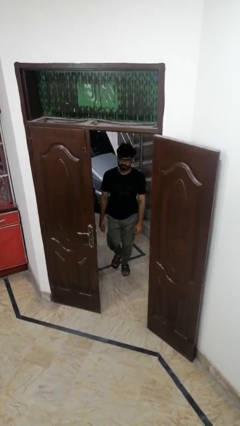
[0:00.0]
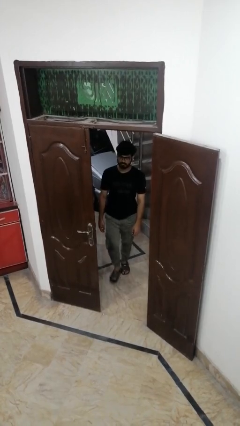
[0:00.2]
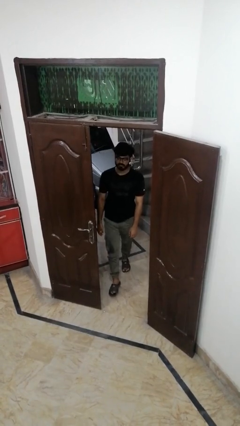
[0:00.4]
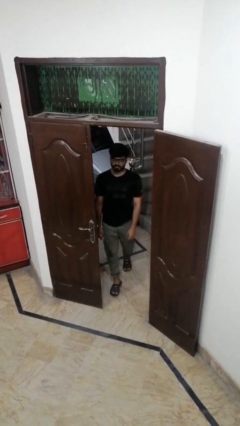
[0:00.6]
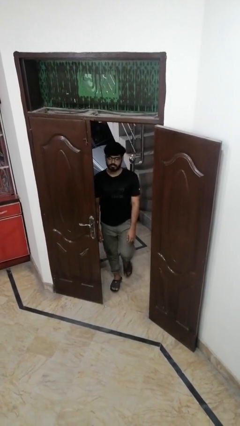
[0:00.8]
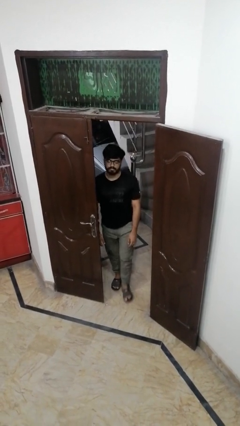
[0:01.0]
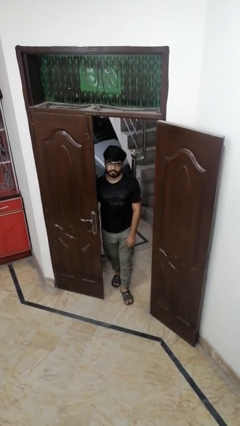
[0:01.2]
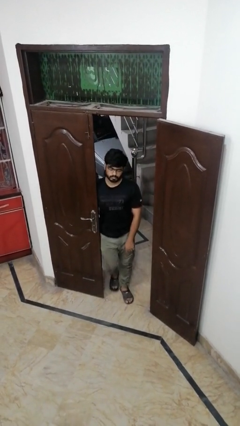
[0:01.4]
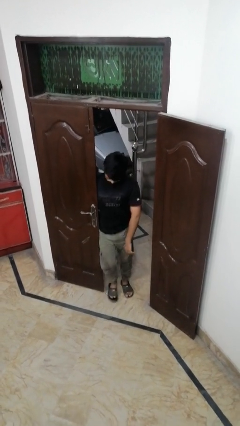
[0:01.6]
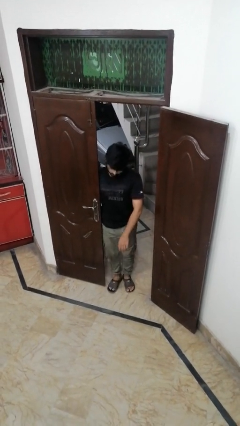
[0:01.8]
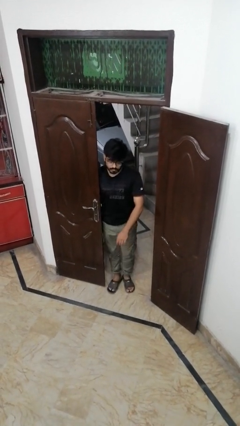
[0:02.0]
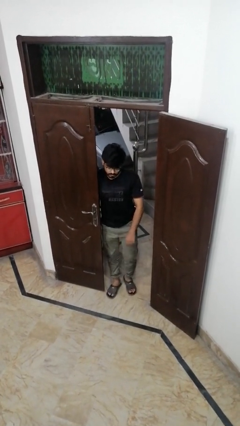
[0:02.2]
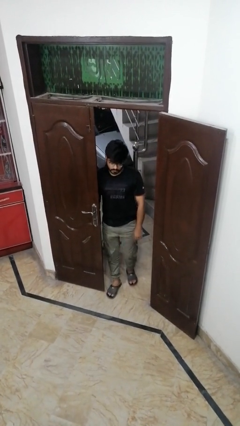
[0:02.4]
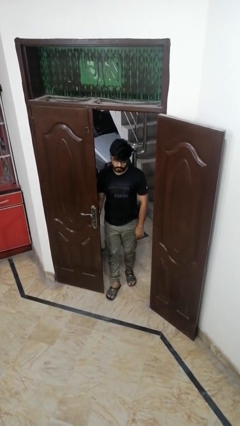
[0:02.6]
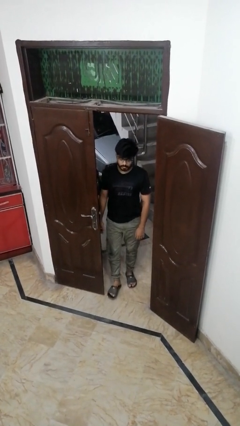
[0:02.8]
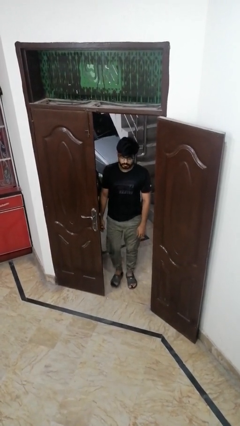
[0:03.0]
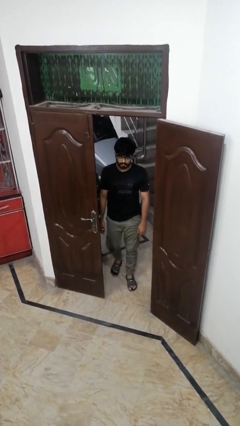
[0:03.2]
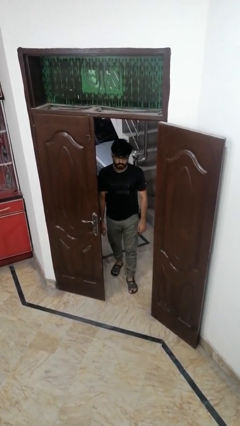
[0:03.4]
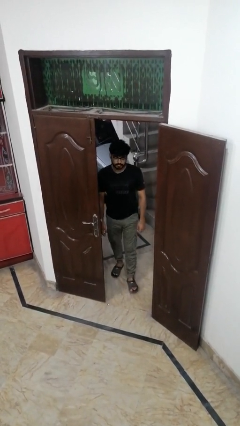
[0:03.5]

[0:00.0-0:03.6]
person bumps into wall

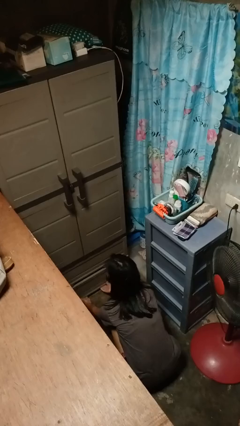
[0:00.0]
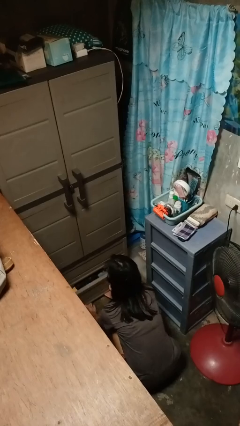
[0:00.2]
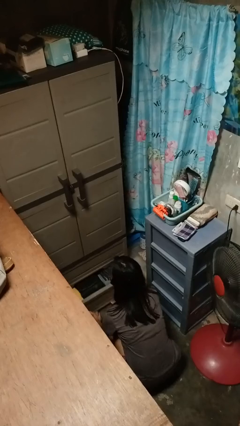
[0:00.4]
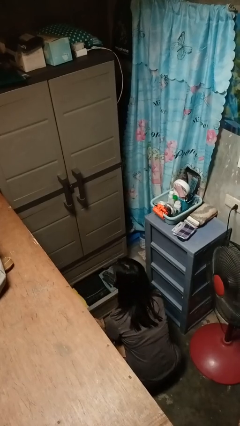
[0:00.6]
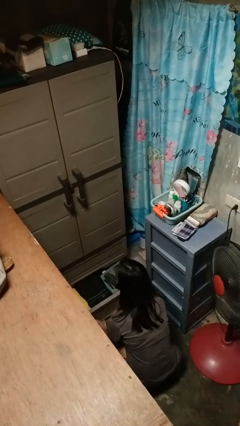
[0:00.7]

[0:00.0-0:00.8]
person opens dresser drawer

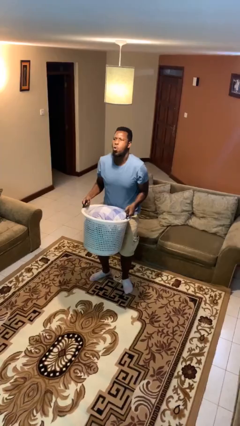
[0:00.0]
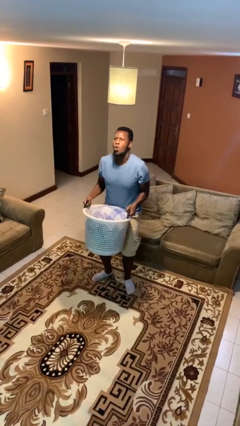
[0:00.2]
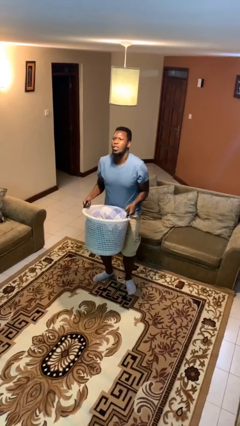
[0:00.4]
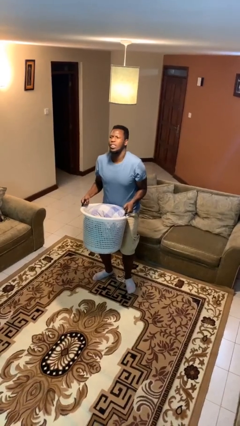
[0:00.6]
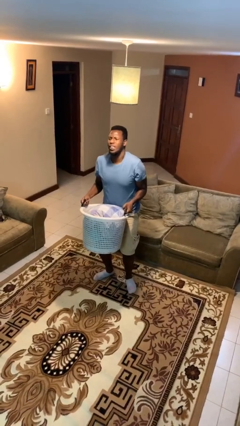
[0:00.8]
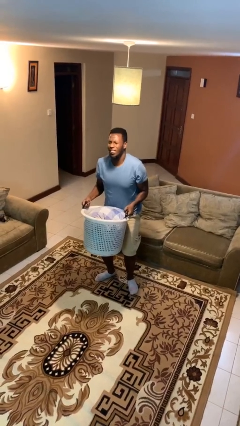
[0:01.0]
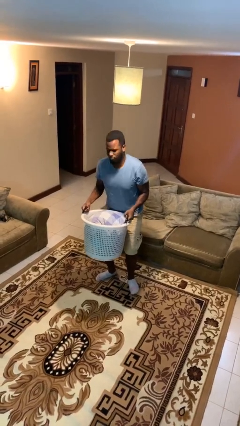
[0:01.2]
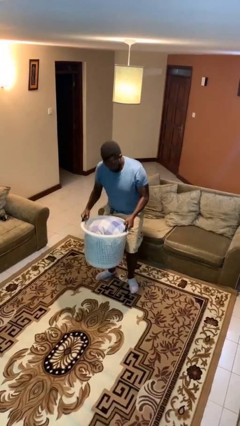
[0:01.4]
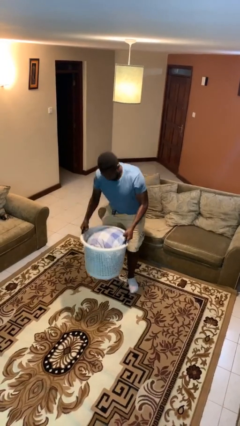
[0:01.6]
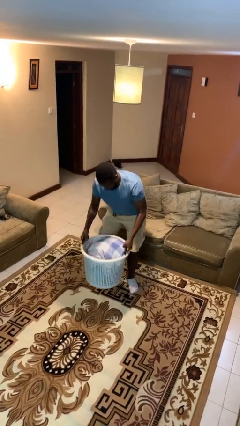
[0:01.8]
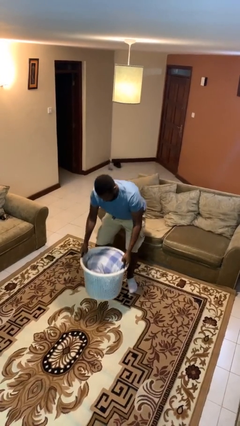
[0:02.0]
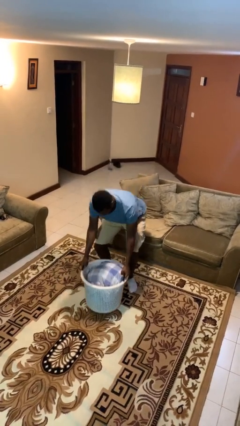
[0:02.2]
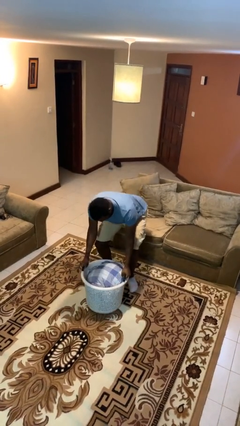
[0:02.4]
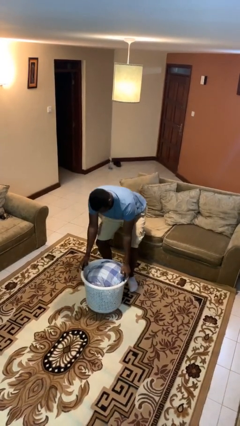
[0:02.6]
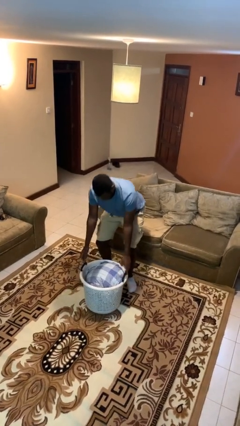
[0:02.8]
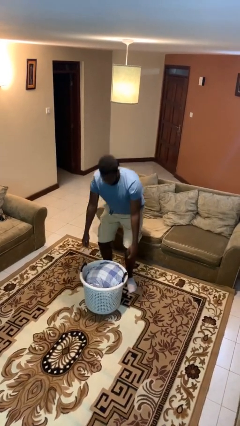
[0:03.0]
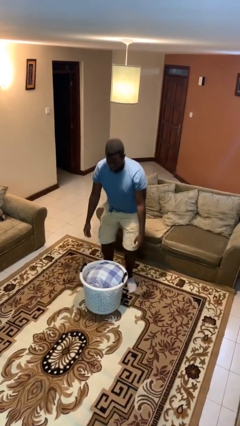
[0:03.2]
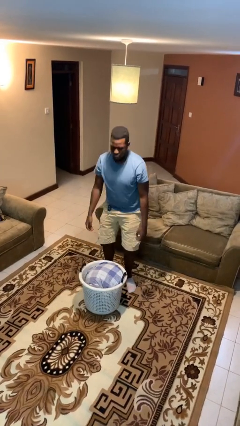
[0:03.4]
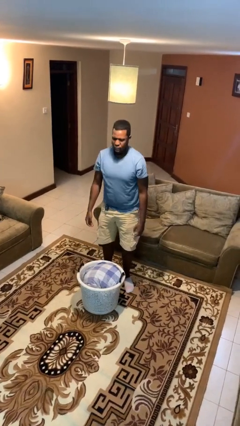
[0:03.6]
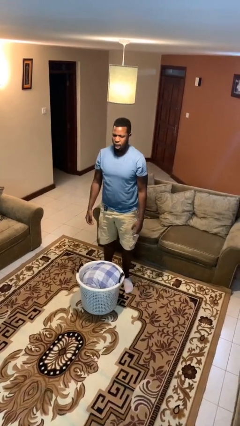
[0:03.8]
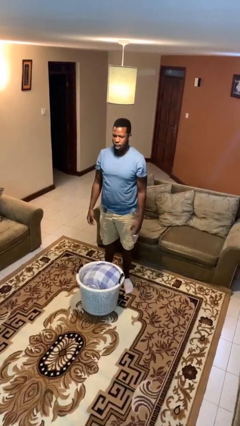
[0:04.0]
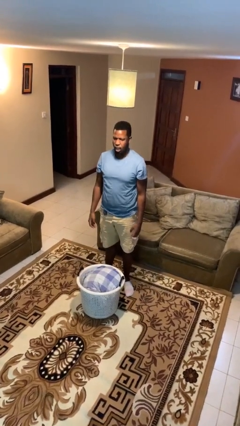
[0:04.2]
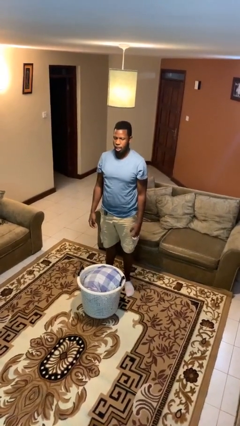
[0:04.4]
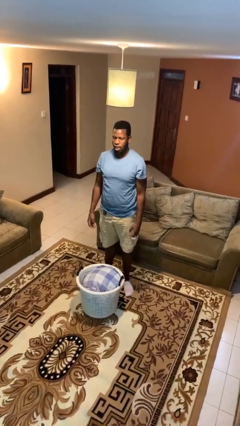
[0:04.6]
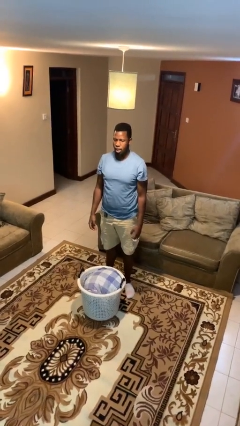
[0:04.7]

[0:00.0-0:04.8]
person puts down object on floor

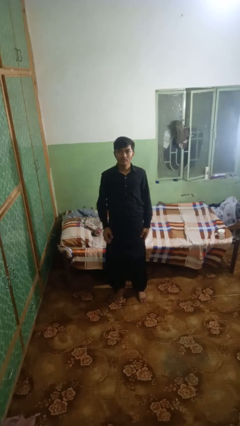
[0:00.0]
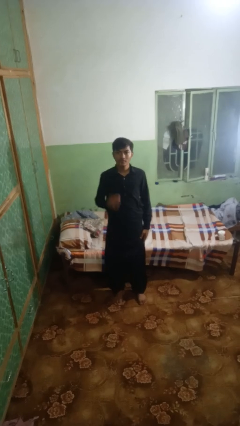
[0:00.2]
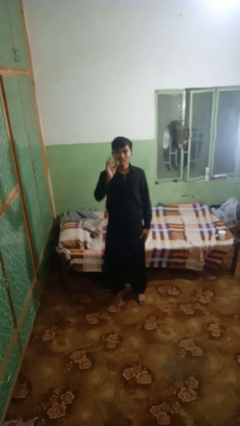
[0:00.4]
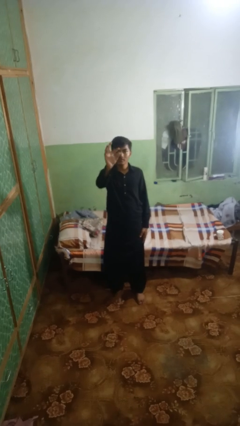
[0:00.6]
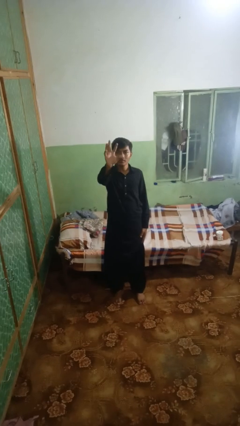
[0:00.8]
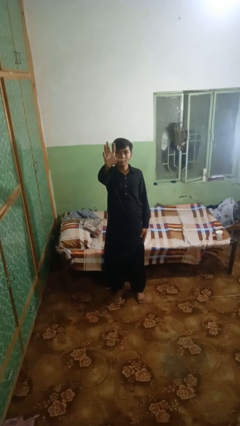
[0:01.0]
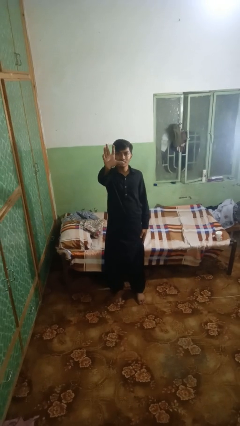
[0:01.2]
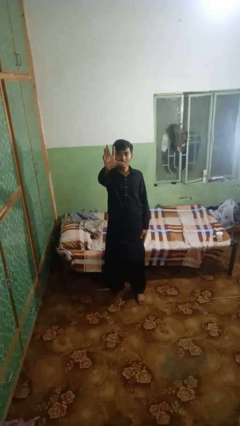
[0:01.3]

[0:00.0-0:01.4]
person gestures zoom in

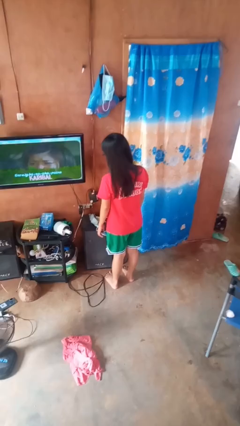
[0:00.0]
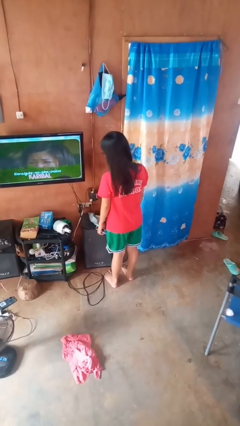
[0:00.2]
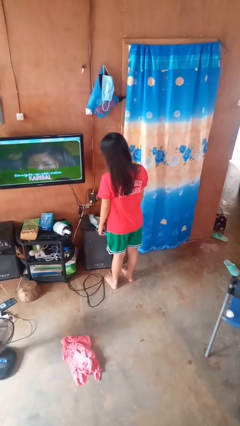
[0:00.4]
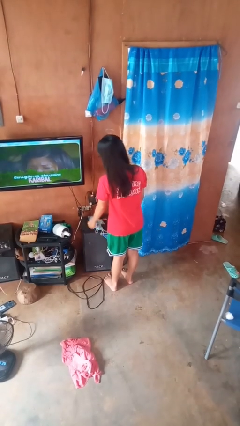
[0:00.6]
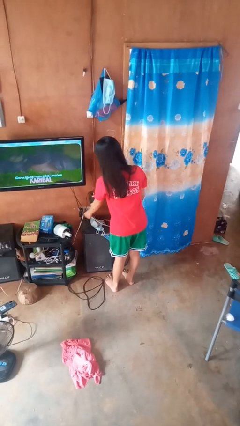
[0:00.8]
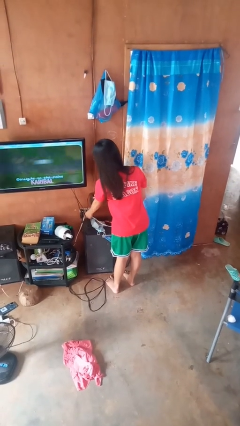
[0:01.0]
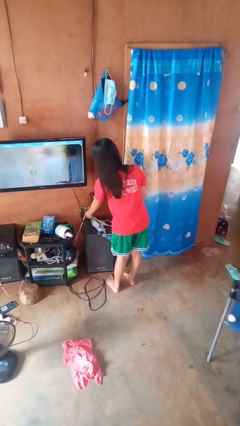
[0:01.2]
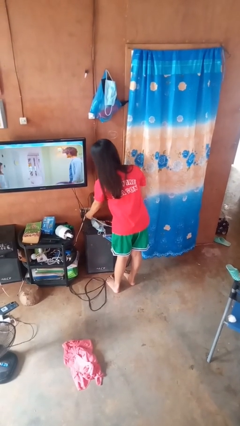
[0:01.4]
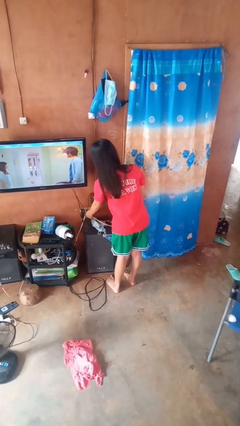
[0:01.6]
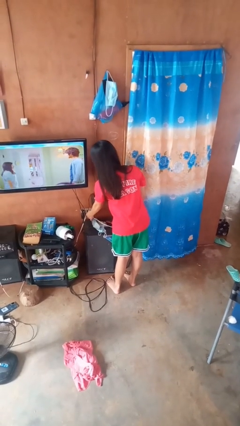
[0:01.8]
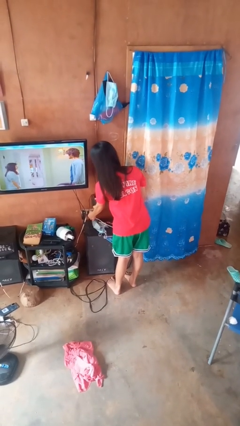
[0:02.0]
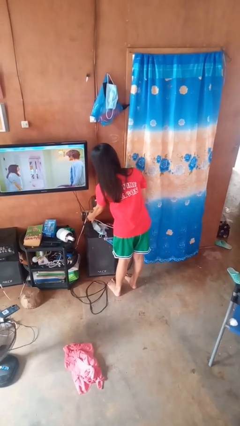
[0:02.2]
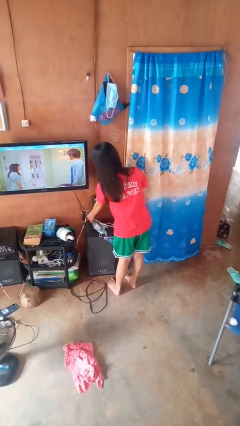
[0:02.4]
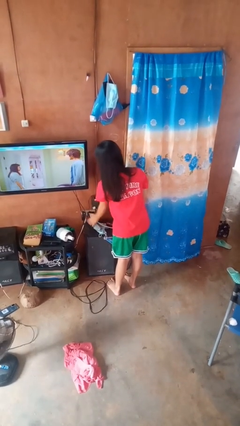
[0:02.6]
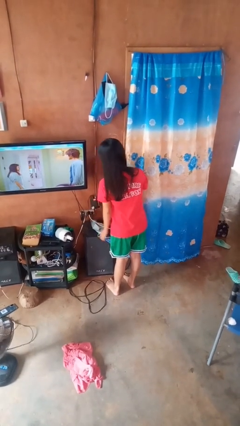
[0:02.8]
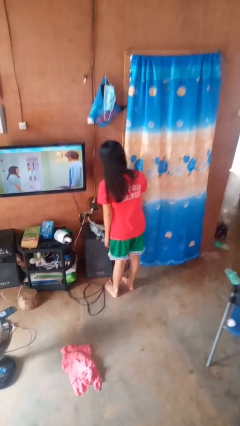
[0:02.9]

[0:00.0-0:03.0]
person plugs into electrical socket

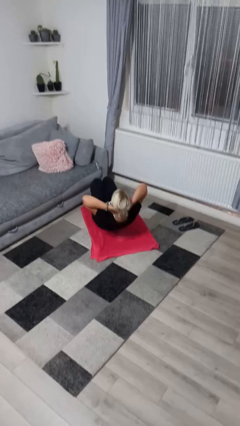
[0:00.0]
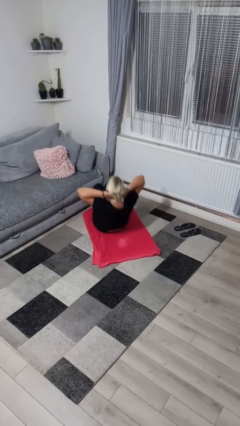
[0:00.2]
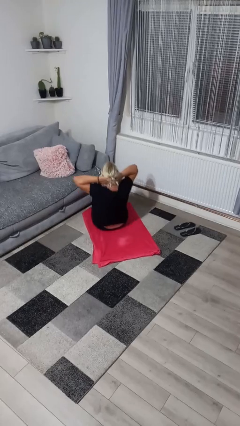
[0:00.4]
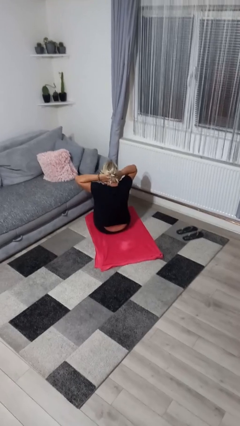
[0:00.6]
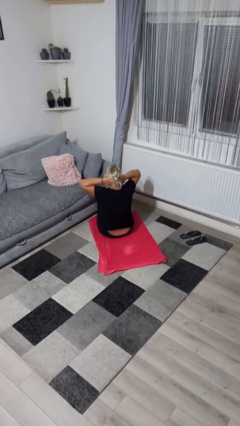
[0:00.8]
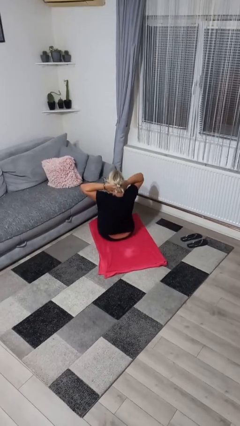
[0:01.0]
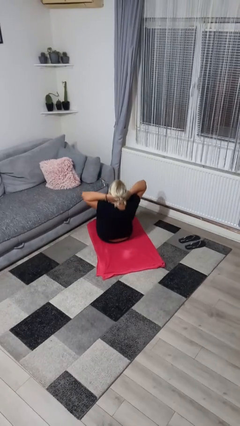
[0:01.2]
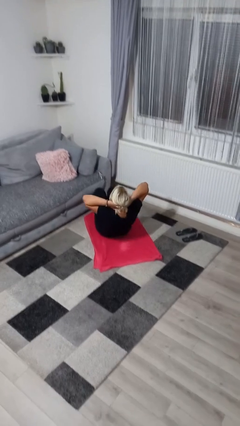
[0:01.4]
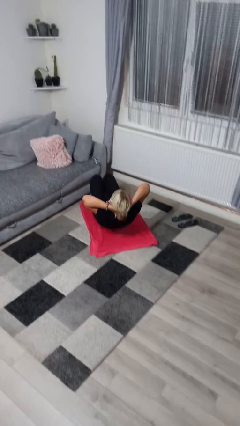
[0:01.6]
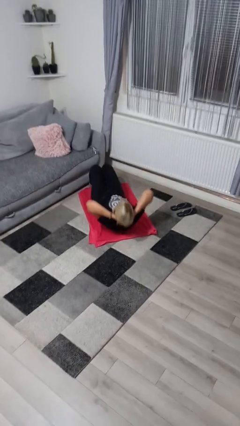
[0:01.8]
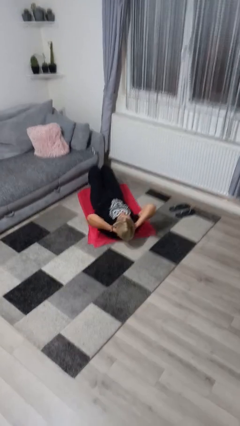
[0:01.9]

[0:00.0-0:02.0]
person exercises with situp

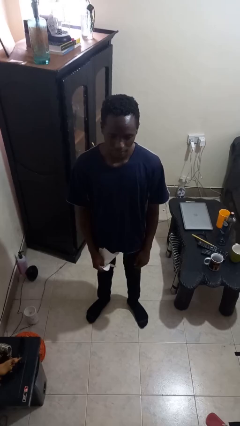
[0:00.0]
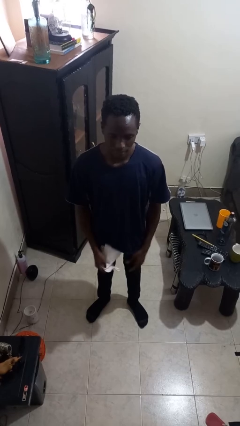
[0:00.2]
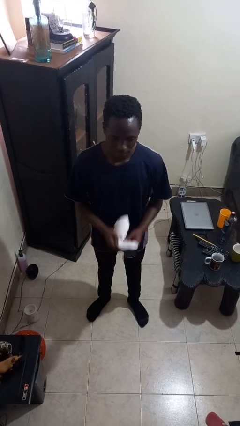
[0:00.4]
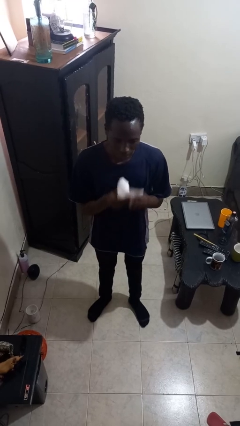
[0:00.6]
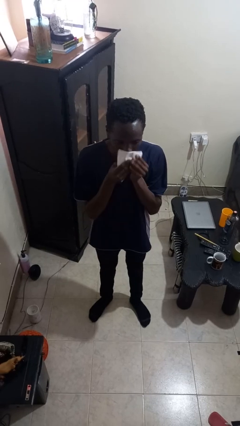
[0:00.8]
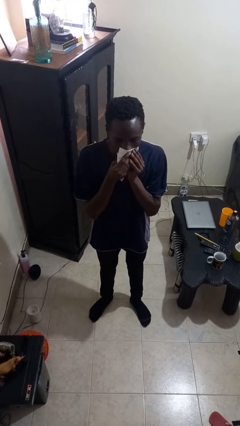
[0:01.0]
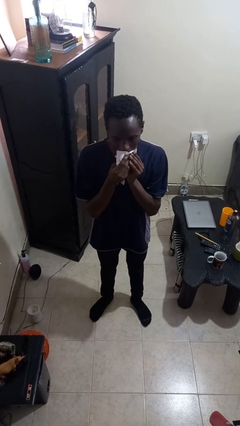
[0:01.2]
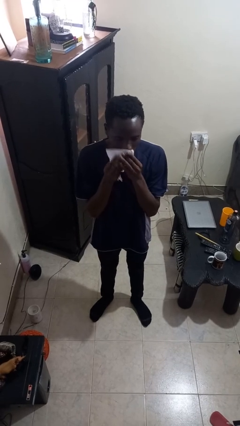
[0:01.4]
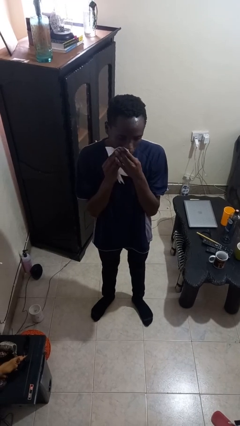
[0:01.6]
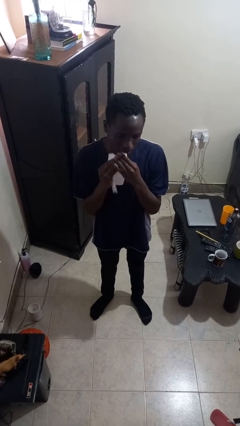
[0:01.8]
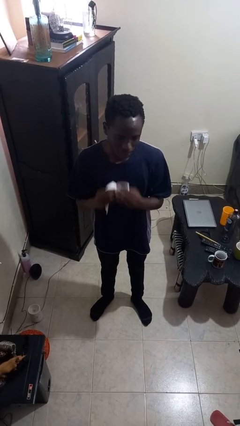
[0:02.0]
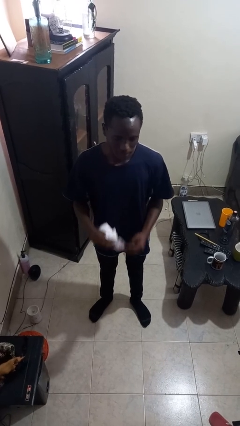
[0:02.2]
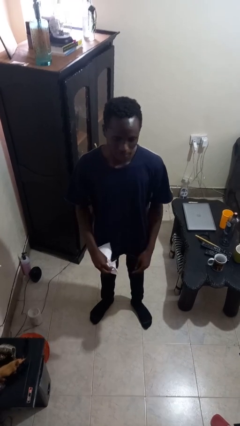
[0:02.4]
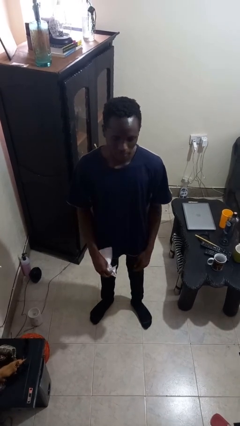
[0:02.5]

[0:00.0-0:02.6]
person wipes mouth with napkin
